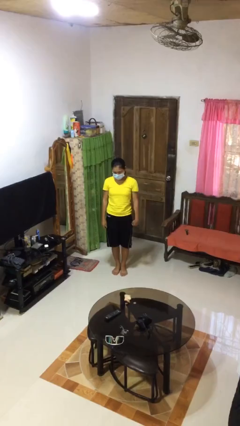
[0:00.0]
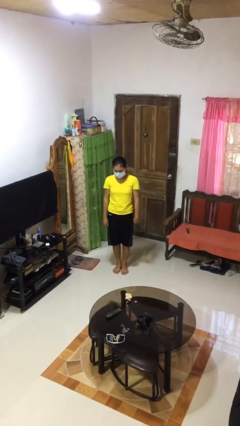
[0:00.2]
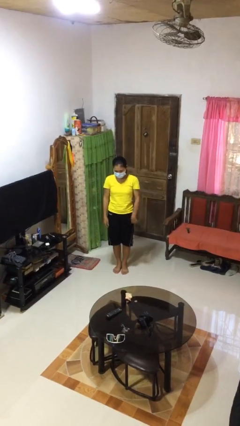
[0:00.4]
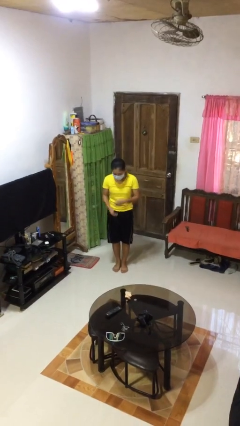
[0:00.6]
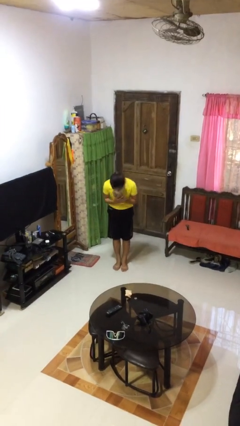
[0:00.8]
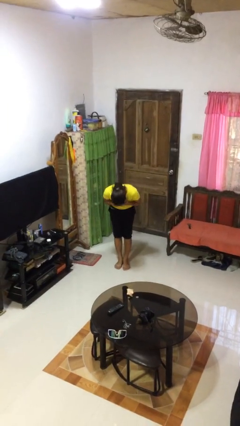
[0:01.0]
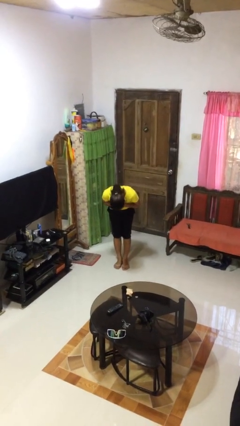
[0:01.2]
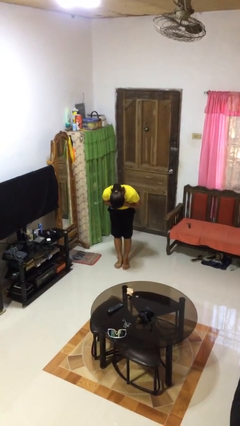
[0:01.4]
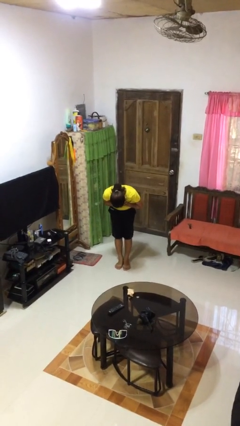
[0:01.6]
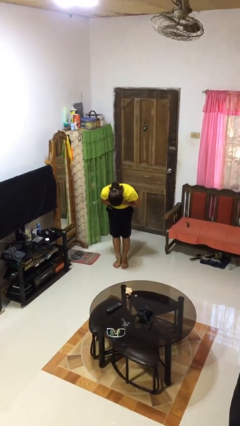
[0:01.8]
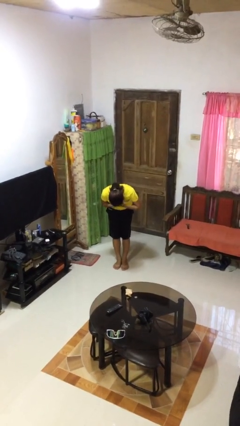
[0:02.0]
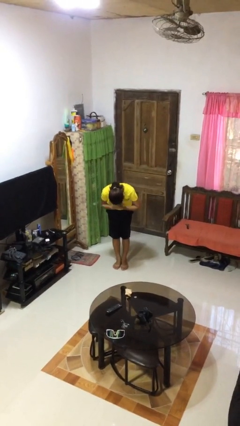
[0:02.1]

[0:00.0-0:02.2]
person bows

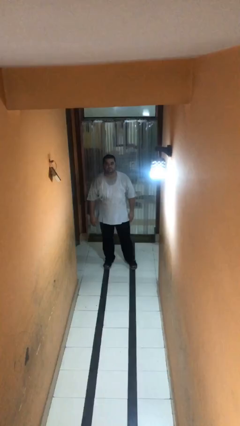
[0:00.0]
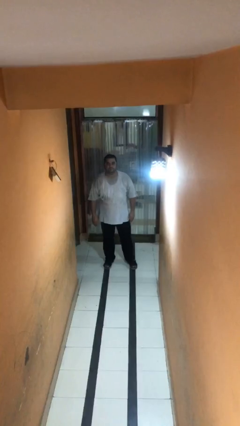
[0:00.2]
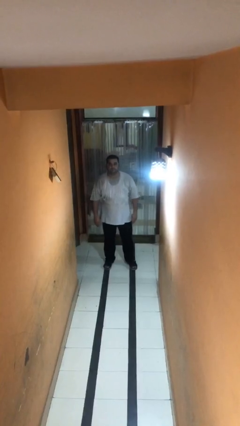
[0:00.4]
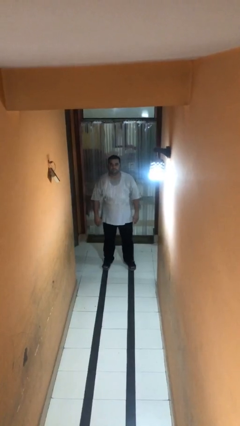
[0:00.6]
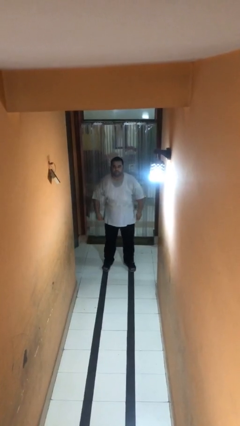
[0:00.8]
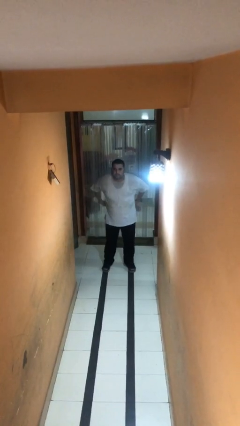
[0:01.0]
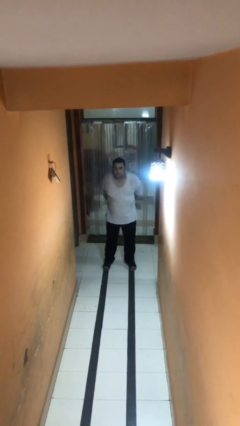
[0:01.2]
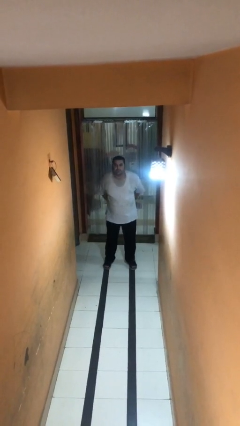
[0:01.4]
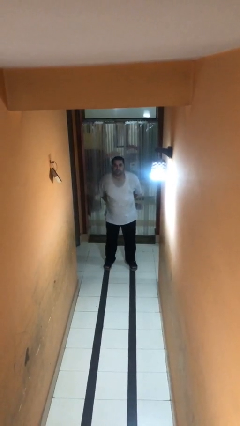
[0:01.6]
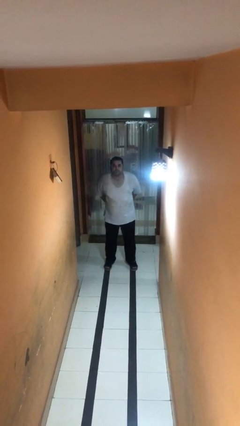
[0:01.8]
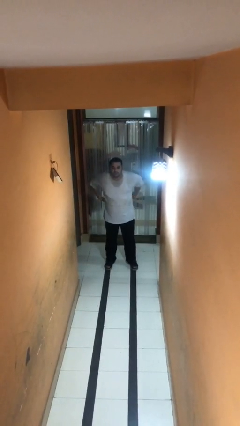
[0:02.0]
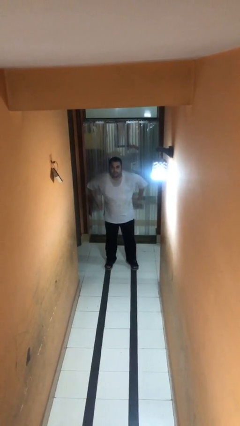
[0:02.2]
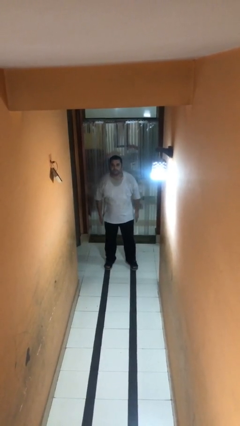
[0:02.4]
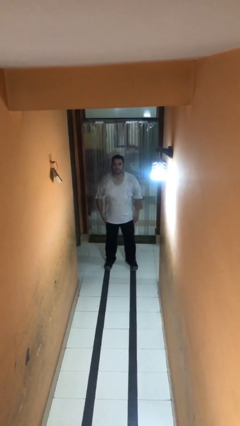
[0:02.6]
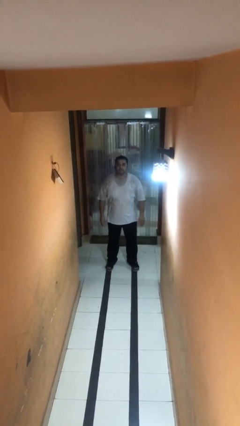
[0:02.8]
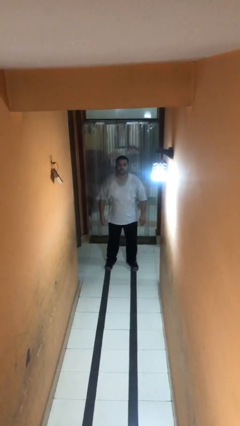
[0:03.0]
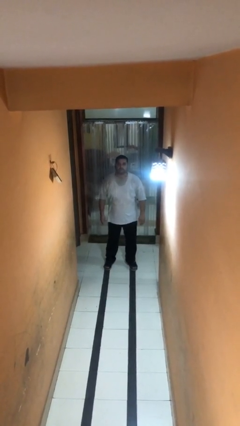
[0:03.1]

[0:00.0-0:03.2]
person puts hands in back pockets

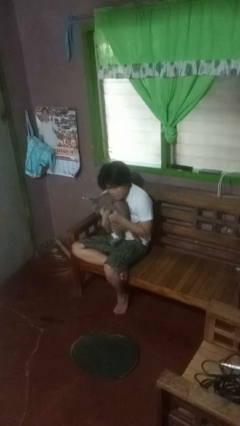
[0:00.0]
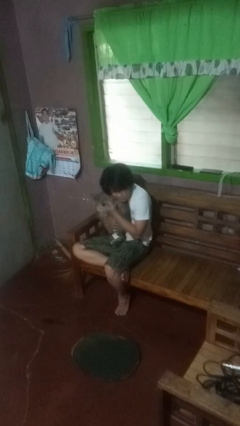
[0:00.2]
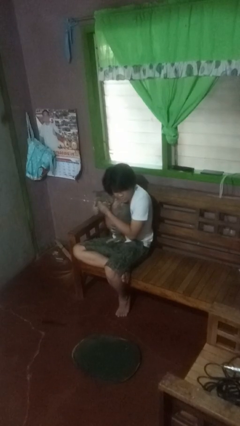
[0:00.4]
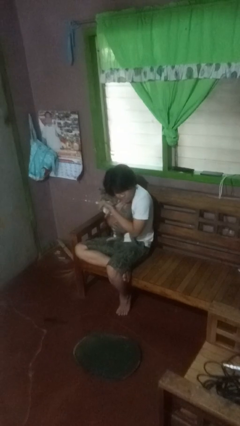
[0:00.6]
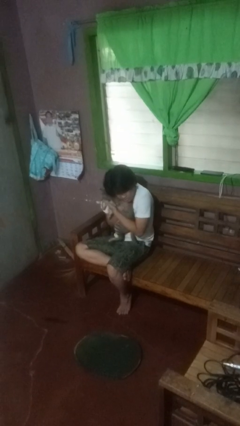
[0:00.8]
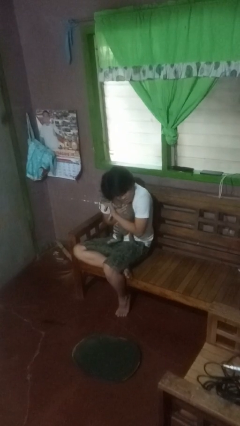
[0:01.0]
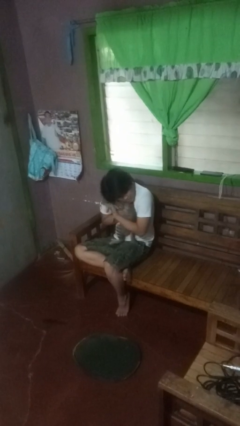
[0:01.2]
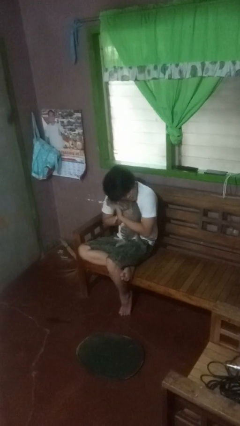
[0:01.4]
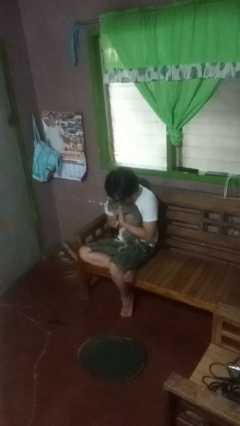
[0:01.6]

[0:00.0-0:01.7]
person hugs cat

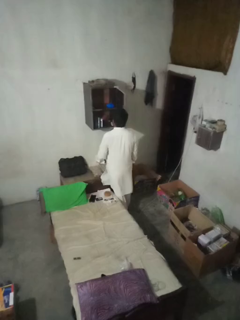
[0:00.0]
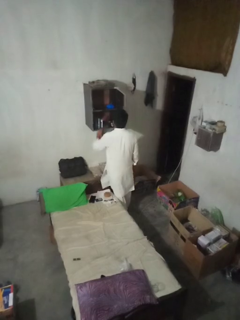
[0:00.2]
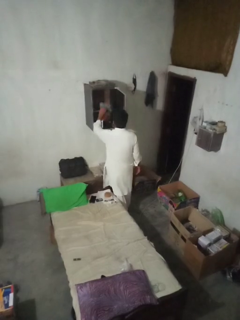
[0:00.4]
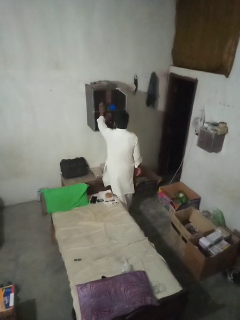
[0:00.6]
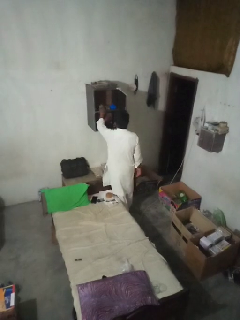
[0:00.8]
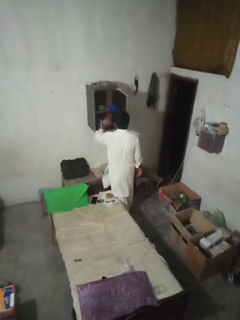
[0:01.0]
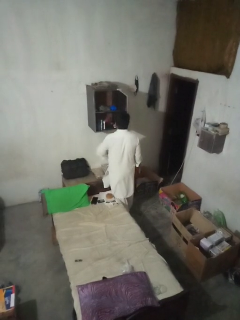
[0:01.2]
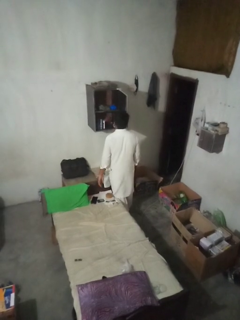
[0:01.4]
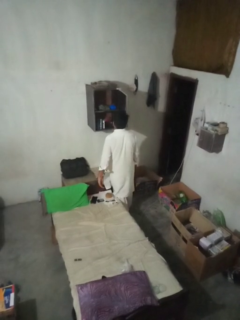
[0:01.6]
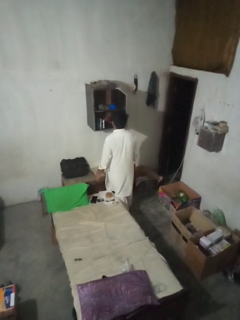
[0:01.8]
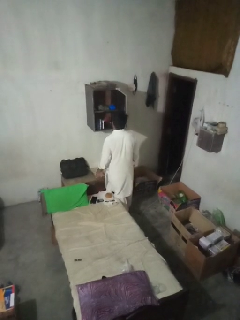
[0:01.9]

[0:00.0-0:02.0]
person puts clothes into dresser

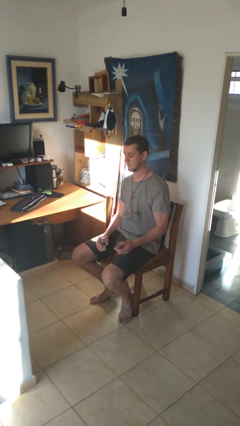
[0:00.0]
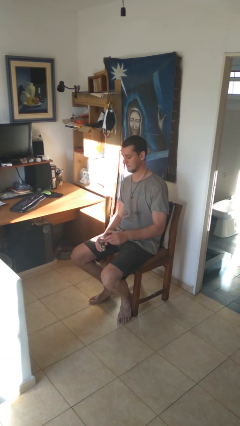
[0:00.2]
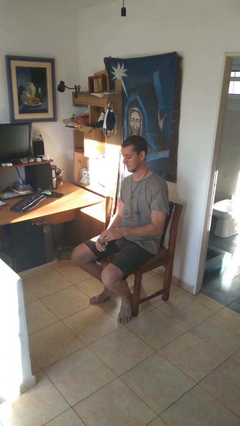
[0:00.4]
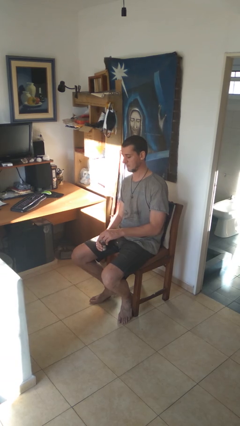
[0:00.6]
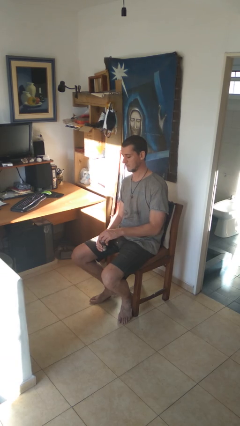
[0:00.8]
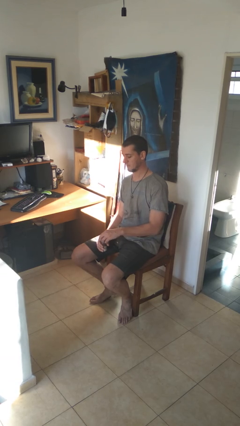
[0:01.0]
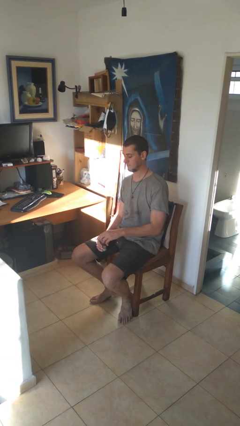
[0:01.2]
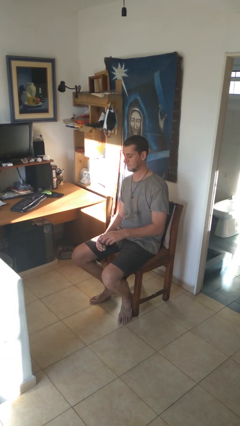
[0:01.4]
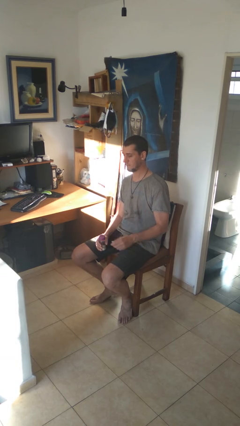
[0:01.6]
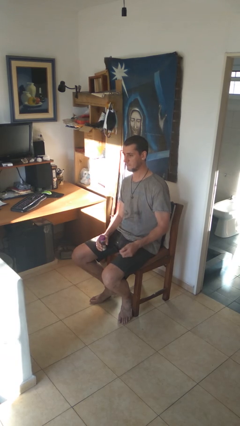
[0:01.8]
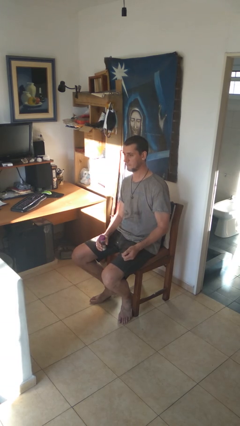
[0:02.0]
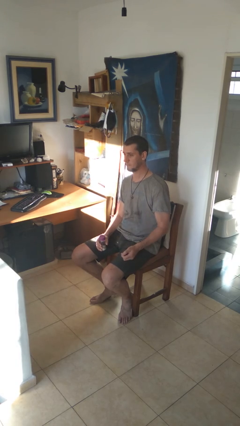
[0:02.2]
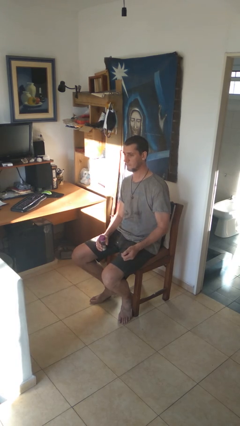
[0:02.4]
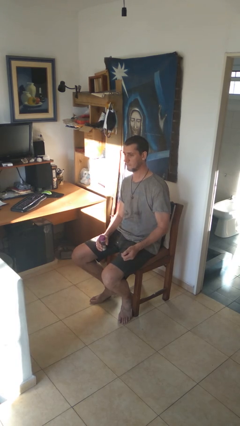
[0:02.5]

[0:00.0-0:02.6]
person closes jar

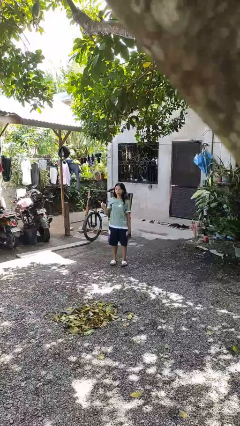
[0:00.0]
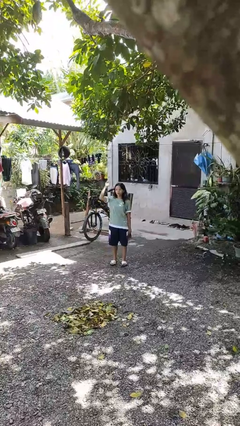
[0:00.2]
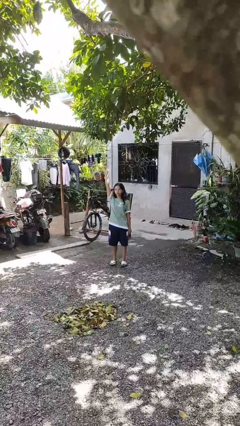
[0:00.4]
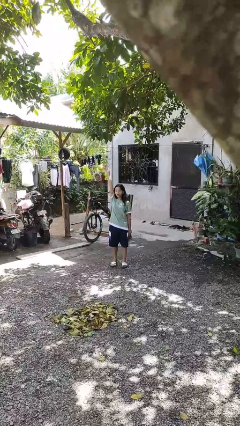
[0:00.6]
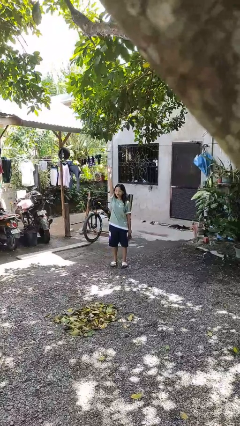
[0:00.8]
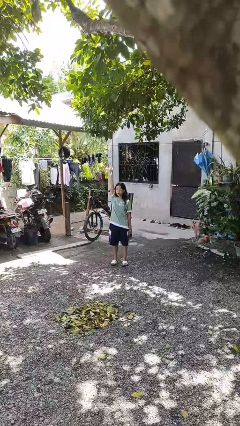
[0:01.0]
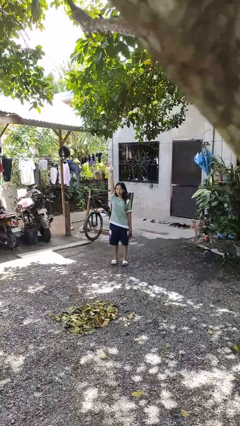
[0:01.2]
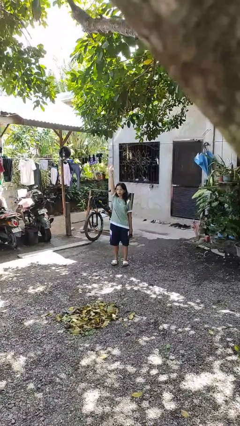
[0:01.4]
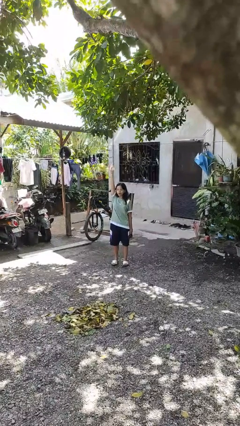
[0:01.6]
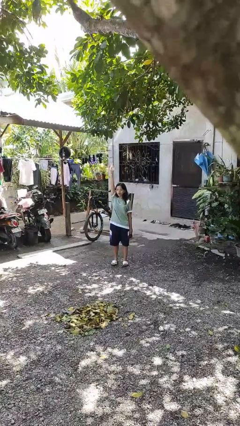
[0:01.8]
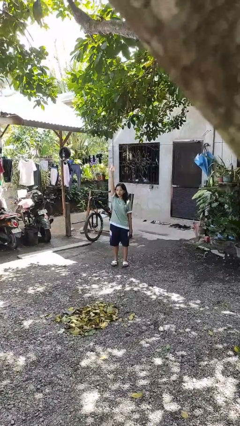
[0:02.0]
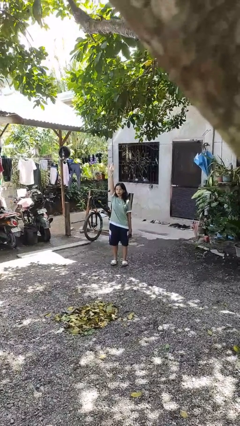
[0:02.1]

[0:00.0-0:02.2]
person gestures raise hand

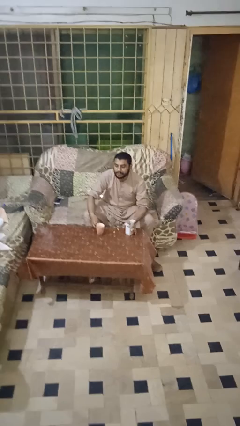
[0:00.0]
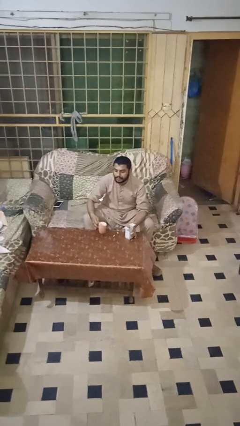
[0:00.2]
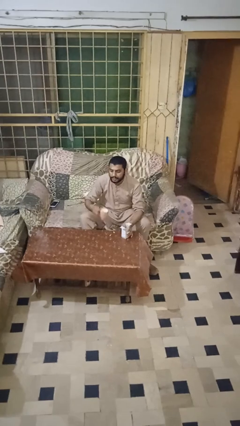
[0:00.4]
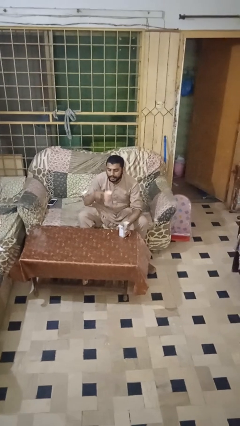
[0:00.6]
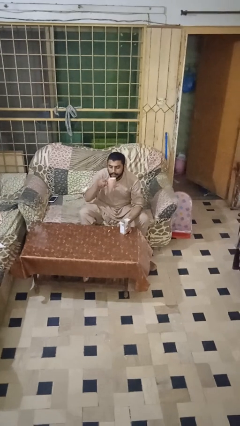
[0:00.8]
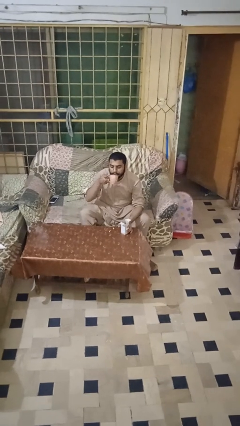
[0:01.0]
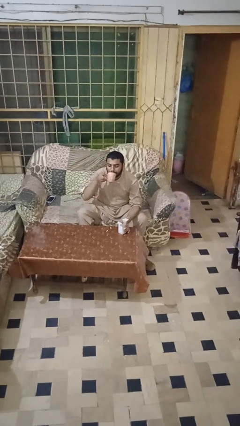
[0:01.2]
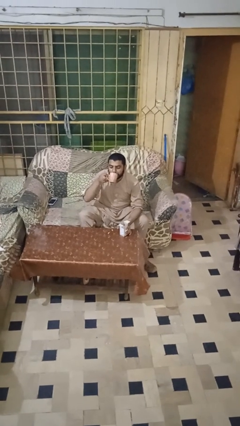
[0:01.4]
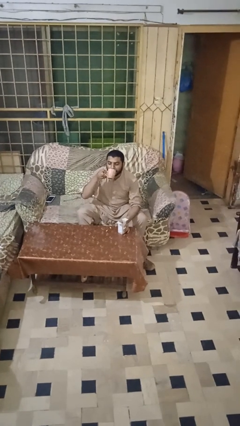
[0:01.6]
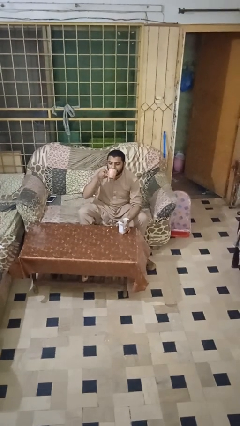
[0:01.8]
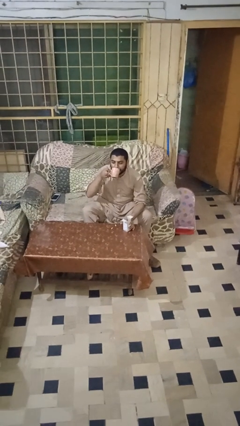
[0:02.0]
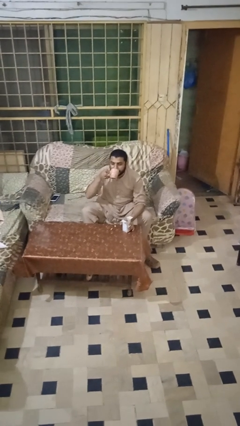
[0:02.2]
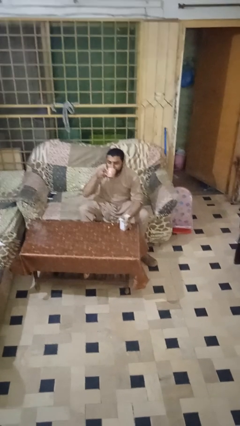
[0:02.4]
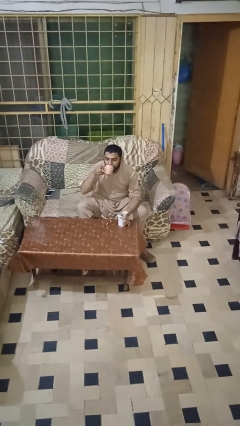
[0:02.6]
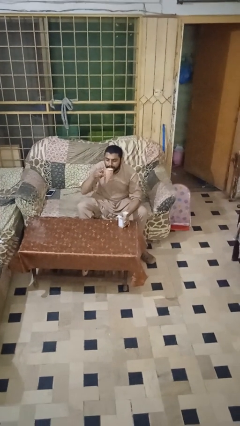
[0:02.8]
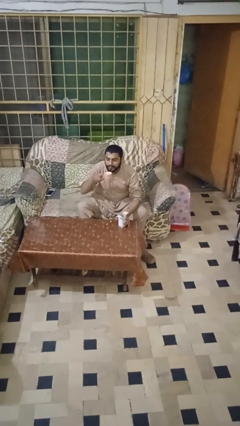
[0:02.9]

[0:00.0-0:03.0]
person drinks from cup

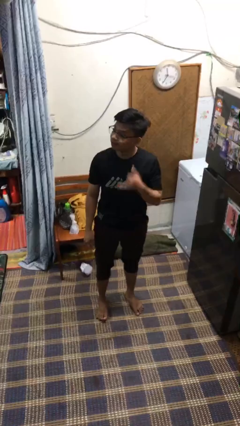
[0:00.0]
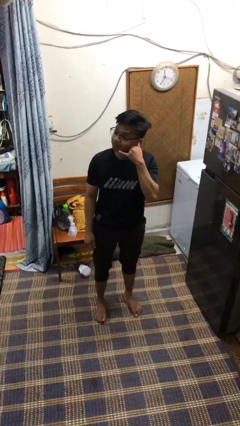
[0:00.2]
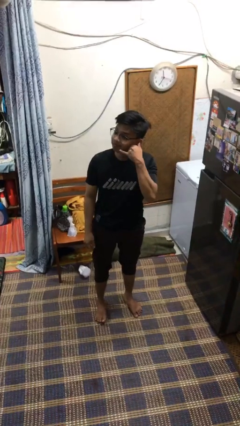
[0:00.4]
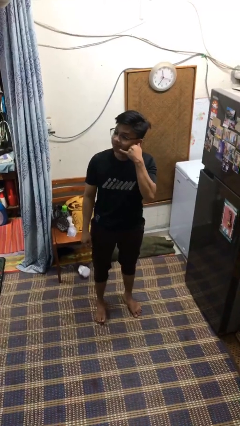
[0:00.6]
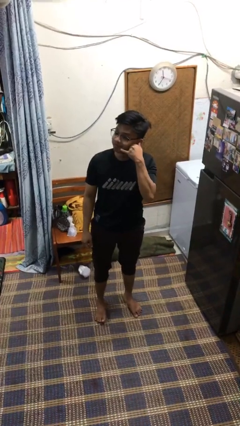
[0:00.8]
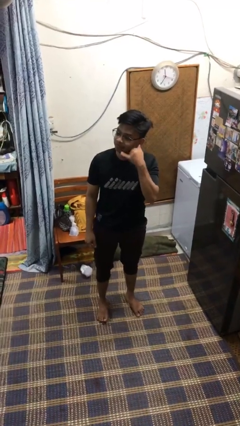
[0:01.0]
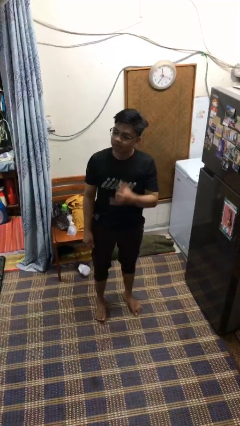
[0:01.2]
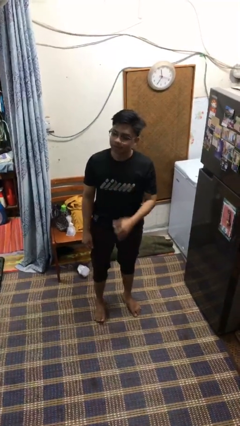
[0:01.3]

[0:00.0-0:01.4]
person gestures call me
